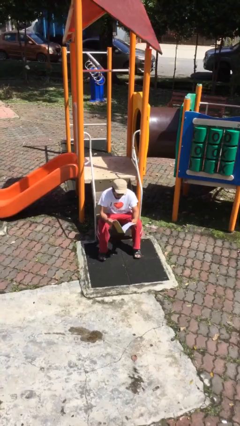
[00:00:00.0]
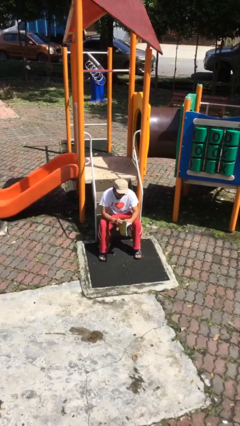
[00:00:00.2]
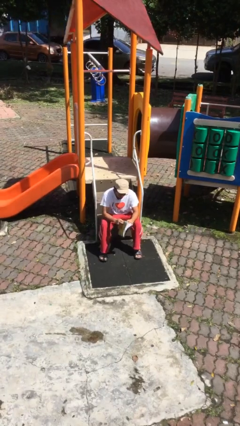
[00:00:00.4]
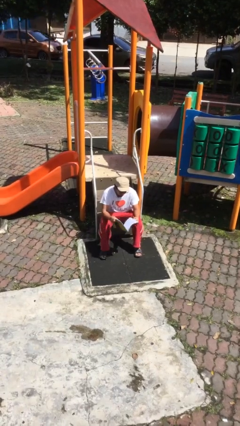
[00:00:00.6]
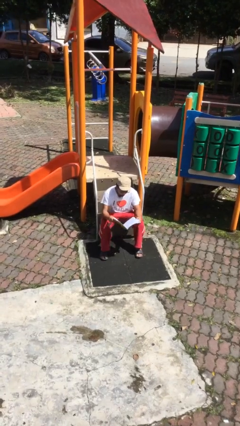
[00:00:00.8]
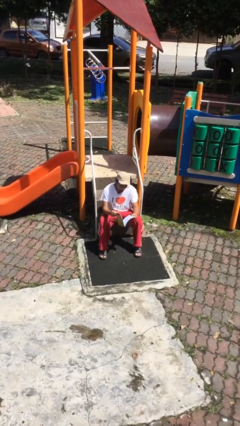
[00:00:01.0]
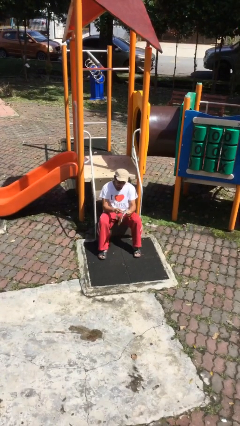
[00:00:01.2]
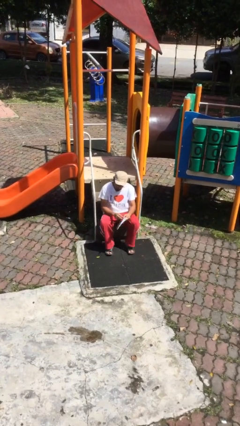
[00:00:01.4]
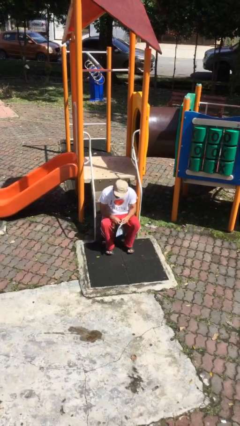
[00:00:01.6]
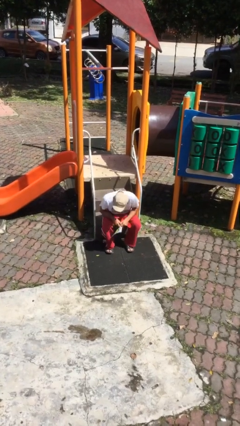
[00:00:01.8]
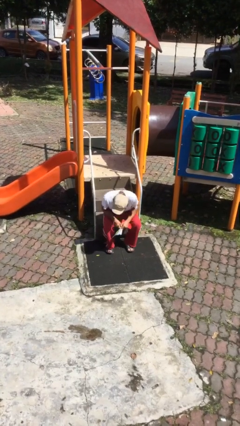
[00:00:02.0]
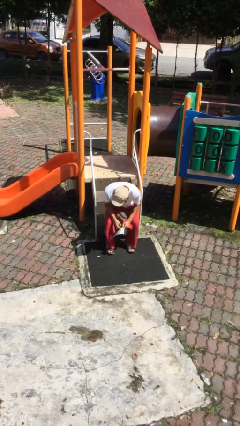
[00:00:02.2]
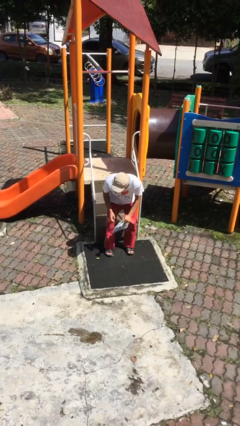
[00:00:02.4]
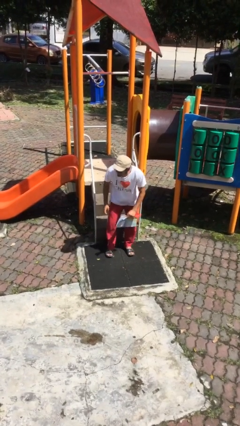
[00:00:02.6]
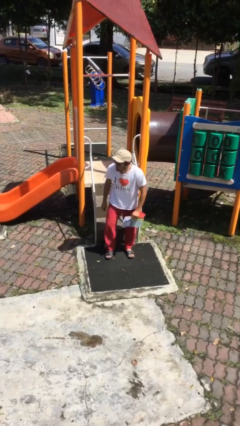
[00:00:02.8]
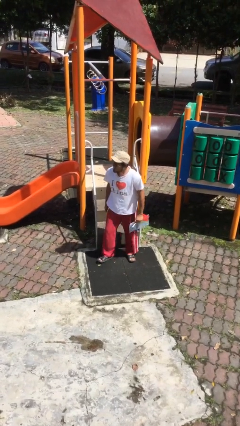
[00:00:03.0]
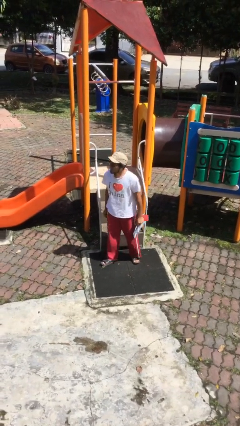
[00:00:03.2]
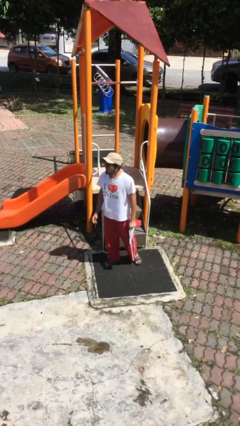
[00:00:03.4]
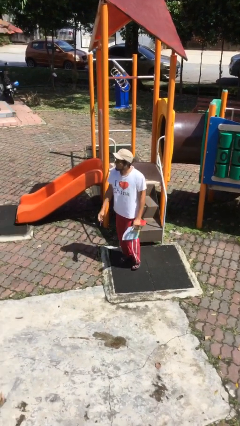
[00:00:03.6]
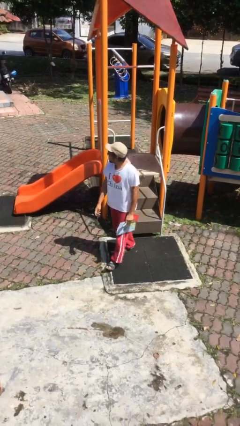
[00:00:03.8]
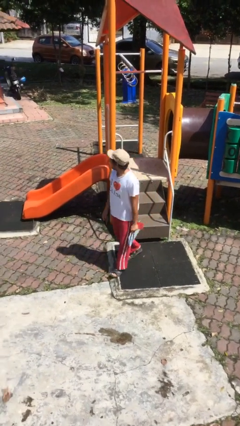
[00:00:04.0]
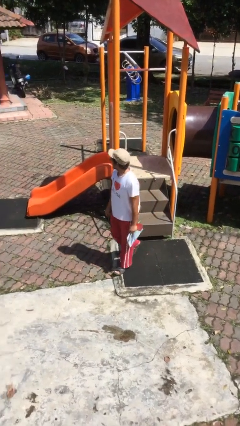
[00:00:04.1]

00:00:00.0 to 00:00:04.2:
person stands up

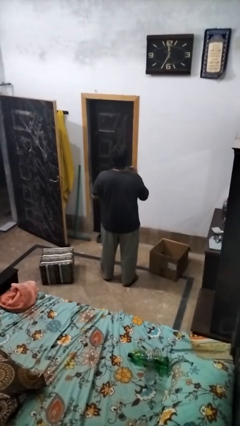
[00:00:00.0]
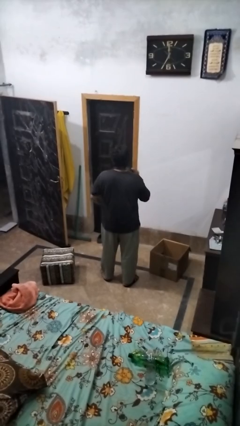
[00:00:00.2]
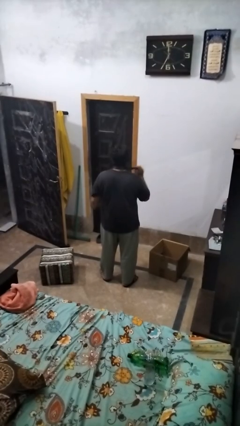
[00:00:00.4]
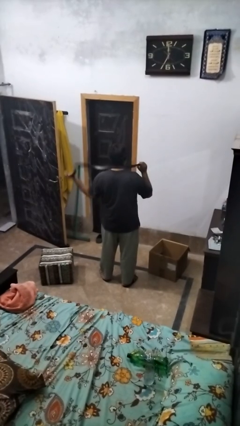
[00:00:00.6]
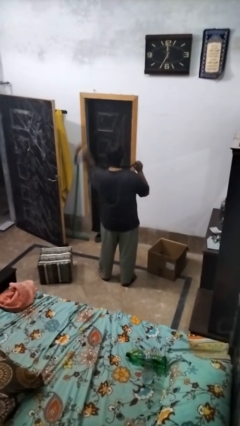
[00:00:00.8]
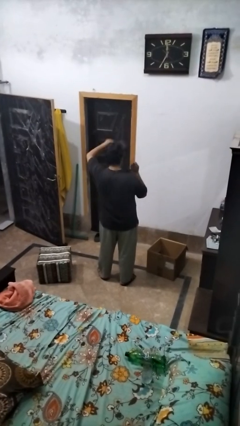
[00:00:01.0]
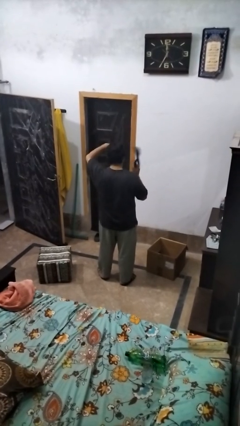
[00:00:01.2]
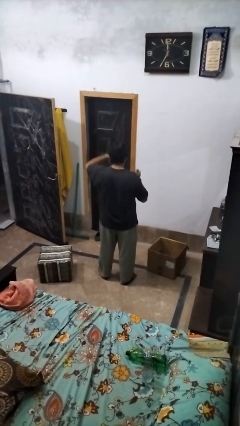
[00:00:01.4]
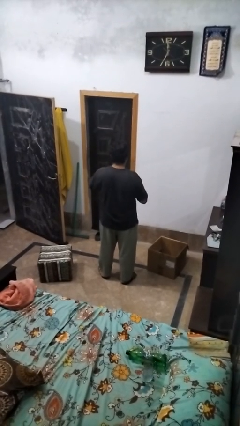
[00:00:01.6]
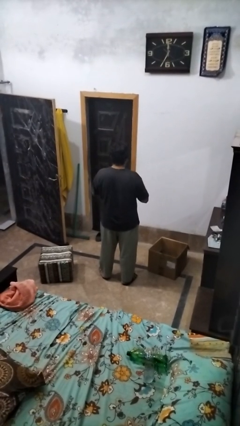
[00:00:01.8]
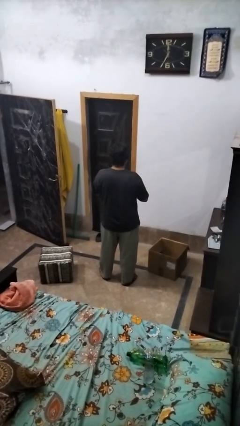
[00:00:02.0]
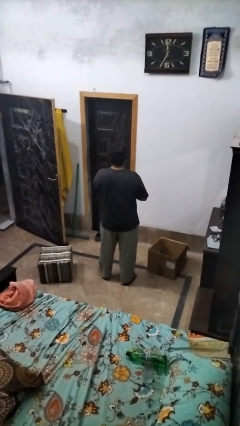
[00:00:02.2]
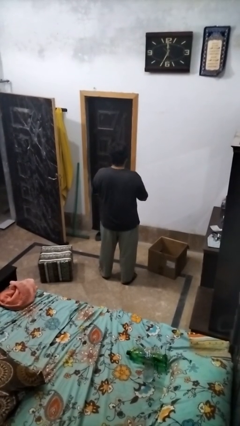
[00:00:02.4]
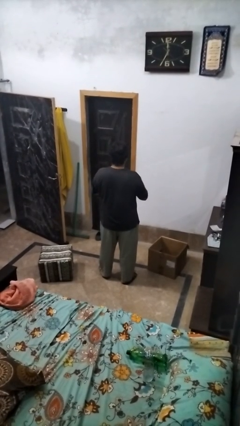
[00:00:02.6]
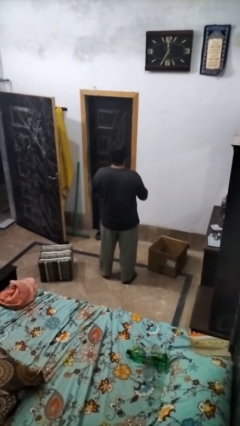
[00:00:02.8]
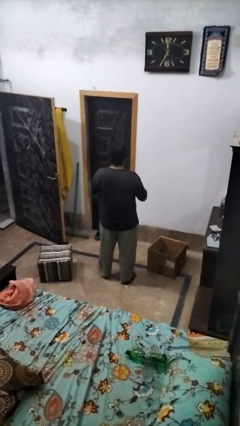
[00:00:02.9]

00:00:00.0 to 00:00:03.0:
person takes off necktie

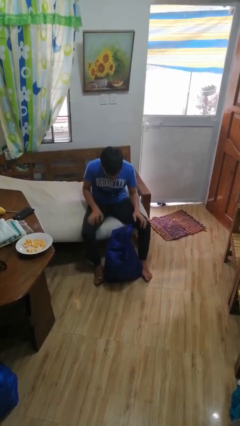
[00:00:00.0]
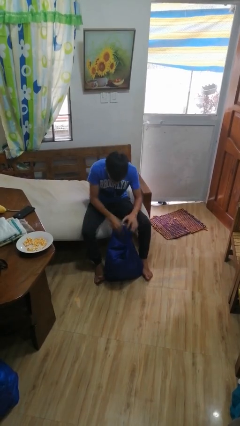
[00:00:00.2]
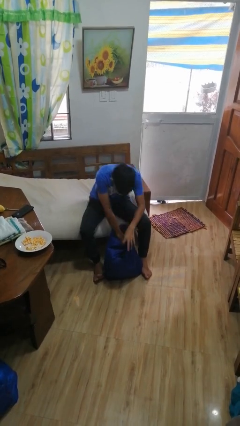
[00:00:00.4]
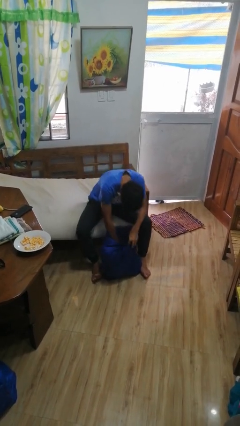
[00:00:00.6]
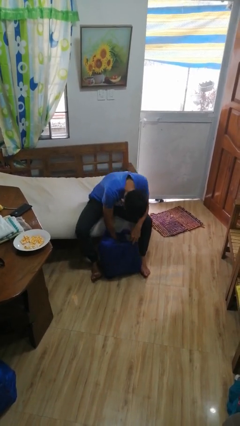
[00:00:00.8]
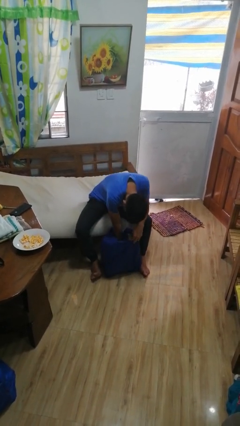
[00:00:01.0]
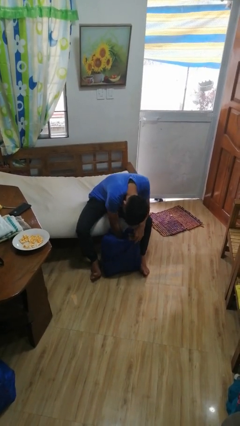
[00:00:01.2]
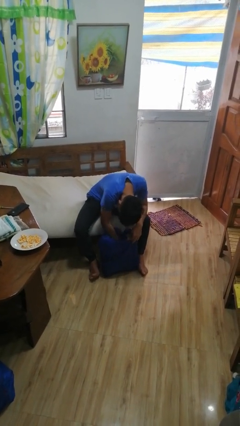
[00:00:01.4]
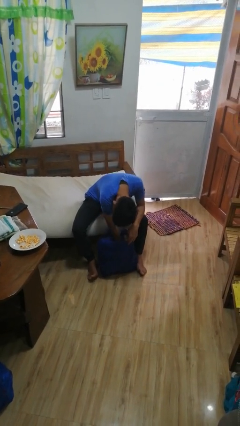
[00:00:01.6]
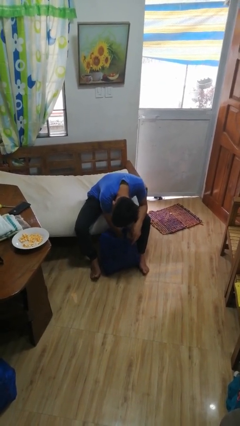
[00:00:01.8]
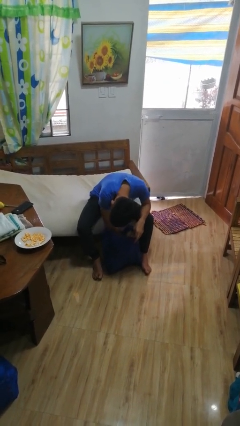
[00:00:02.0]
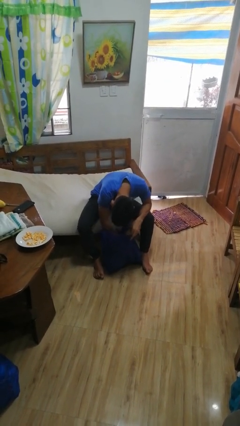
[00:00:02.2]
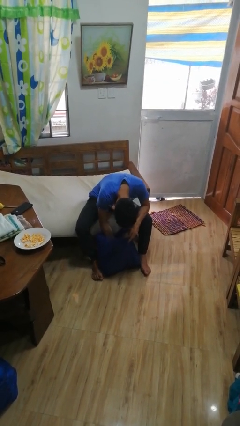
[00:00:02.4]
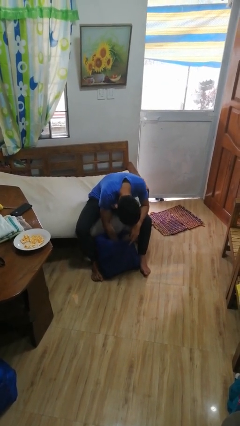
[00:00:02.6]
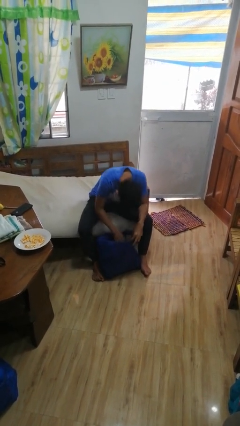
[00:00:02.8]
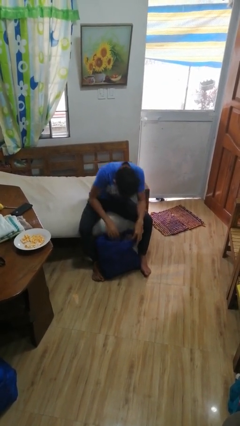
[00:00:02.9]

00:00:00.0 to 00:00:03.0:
person searches in bag

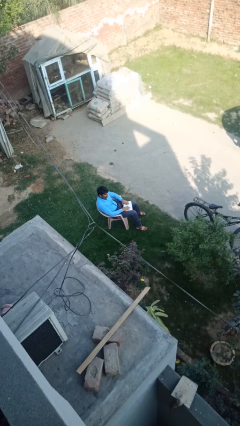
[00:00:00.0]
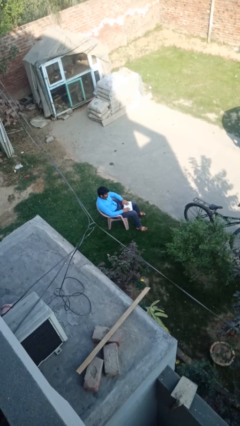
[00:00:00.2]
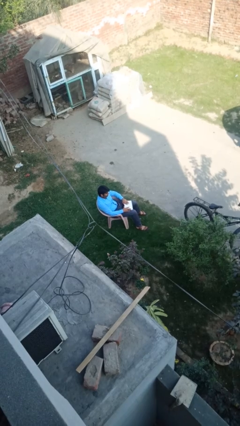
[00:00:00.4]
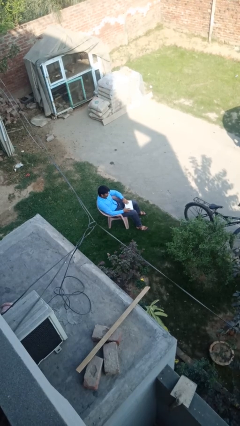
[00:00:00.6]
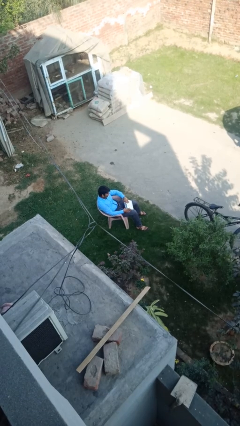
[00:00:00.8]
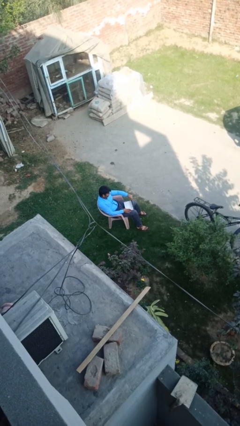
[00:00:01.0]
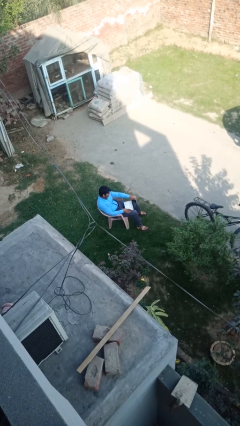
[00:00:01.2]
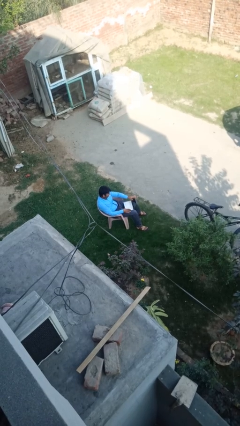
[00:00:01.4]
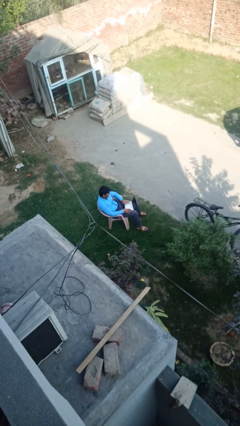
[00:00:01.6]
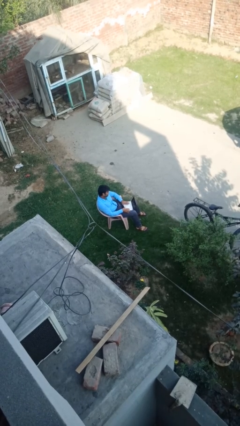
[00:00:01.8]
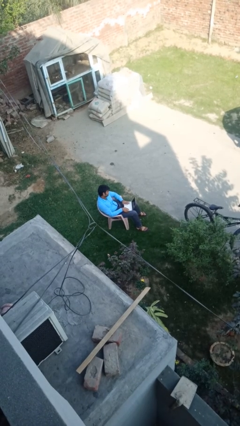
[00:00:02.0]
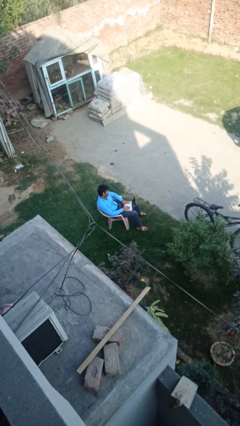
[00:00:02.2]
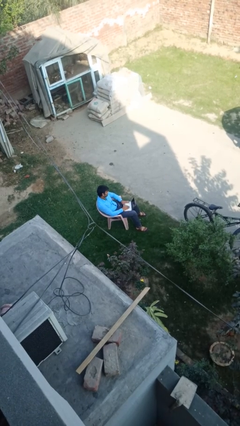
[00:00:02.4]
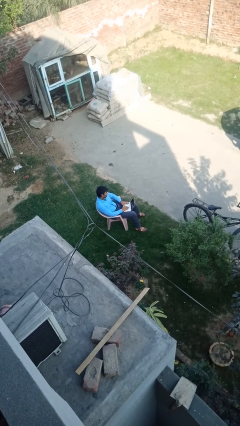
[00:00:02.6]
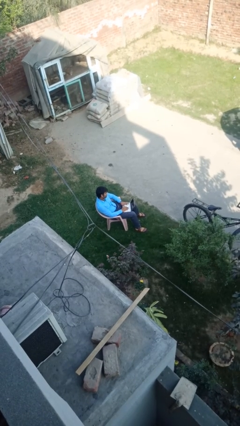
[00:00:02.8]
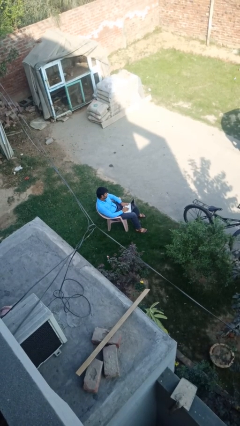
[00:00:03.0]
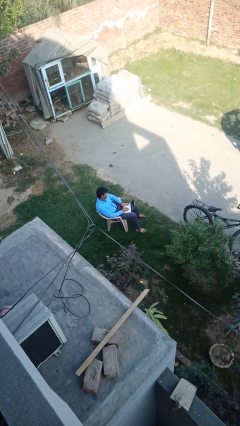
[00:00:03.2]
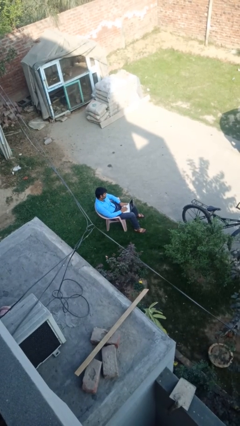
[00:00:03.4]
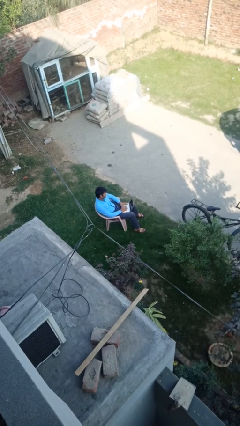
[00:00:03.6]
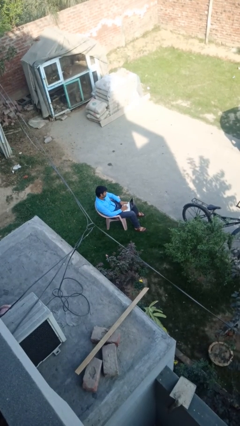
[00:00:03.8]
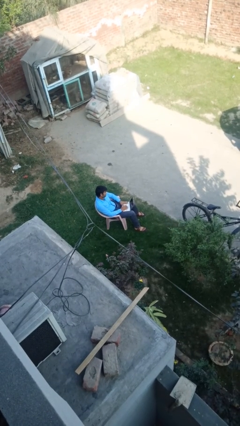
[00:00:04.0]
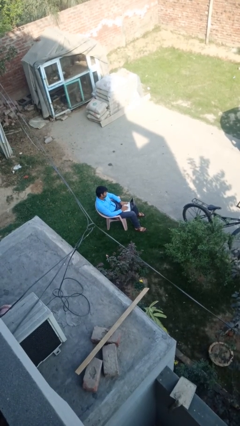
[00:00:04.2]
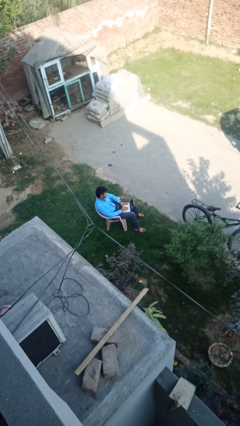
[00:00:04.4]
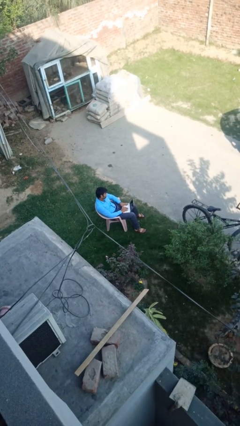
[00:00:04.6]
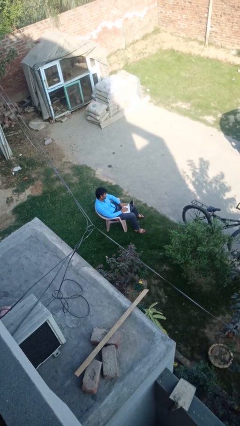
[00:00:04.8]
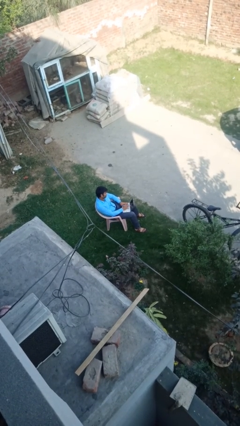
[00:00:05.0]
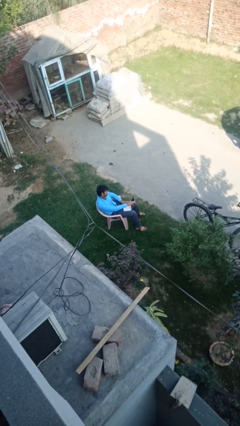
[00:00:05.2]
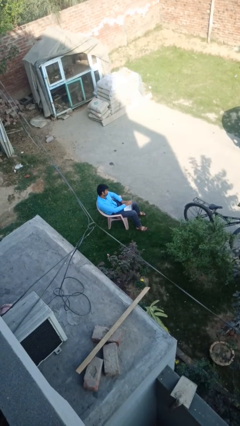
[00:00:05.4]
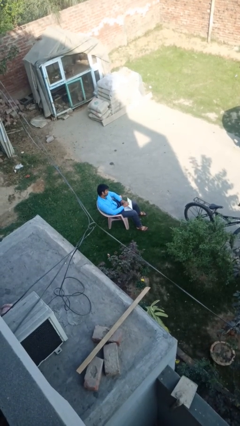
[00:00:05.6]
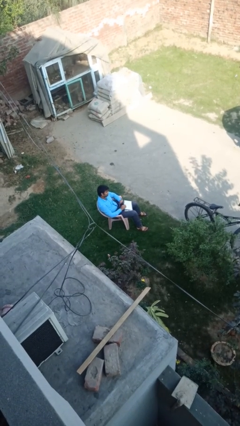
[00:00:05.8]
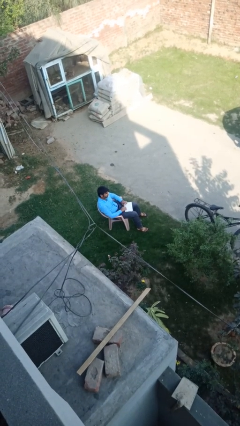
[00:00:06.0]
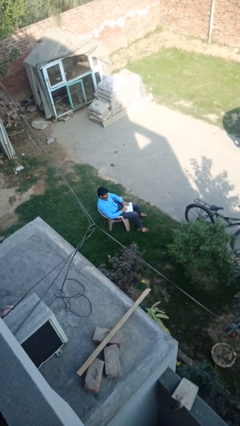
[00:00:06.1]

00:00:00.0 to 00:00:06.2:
person interacts with laptop

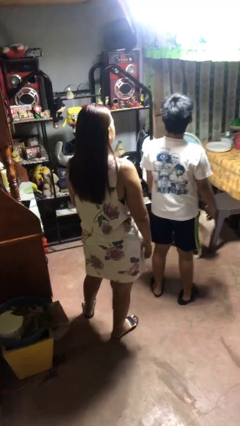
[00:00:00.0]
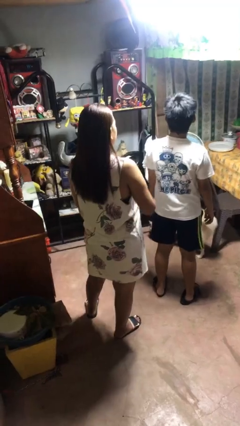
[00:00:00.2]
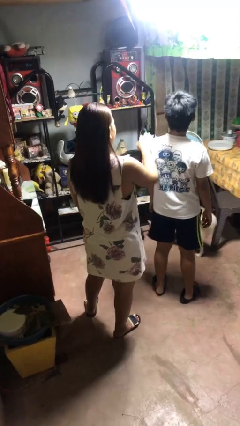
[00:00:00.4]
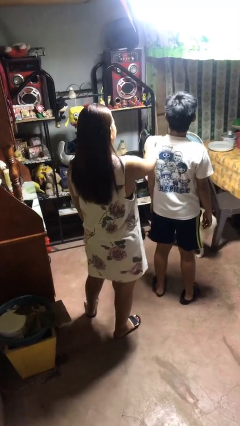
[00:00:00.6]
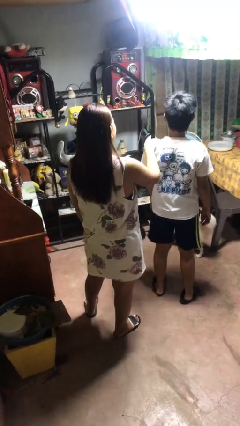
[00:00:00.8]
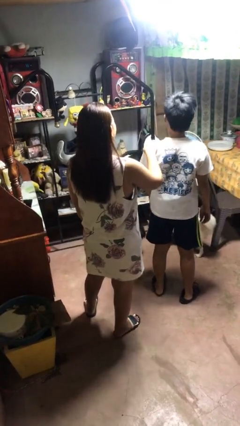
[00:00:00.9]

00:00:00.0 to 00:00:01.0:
person grabs person by shoulder
